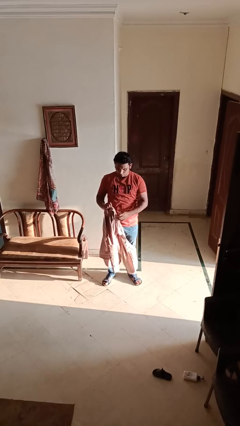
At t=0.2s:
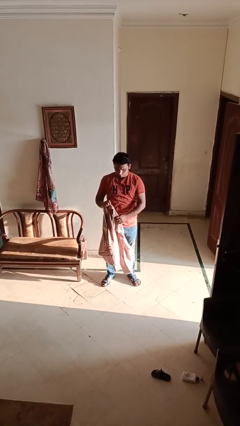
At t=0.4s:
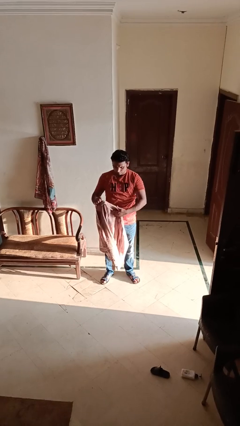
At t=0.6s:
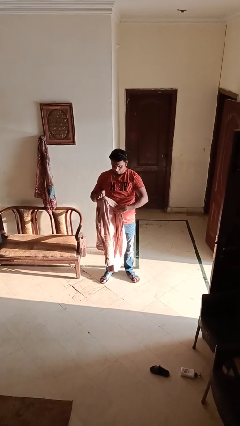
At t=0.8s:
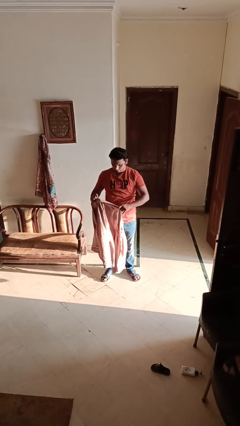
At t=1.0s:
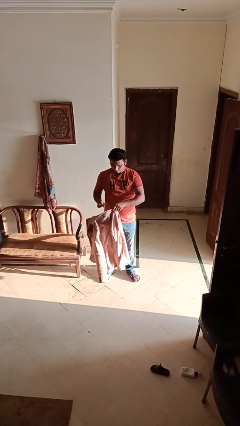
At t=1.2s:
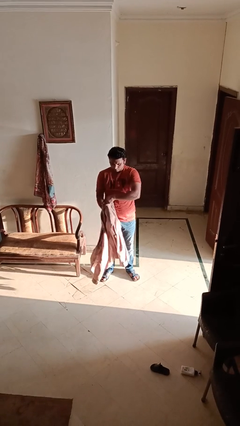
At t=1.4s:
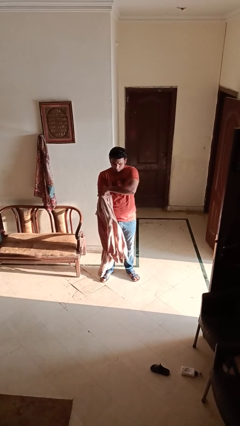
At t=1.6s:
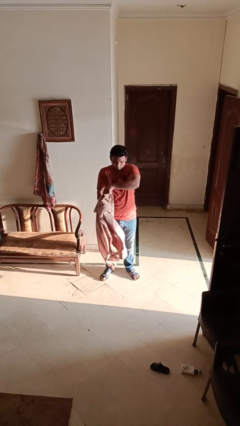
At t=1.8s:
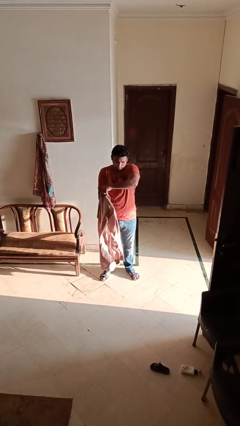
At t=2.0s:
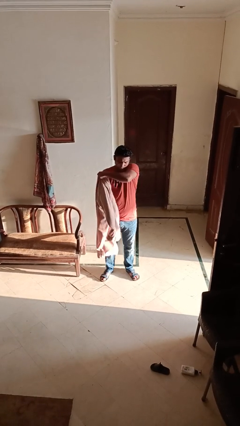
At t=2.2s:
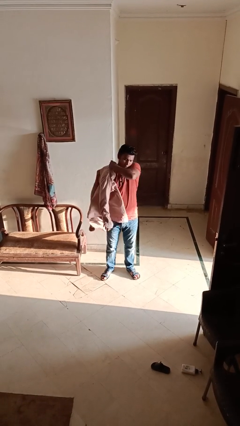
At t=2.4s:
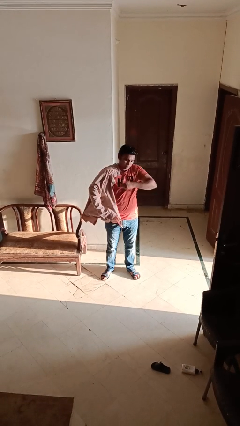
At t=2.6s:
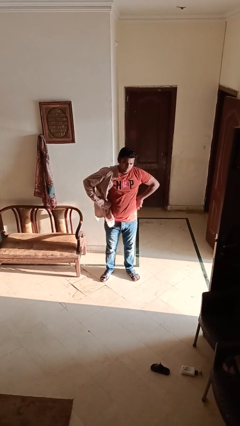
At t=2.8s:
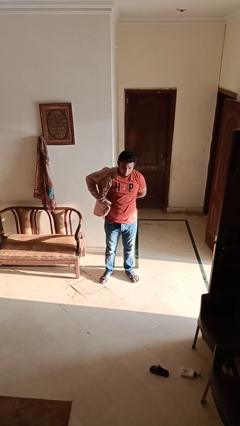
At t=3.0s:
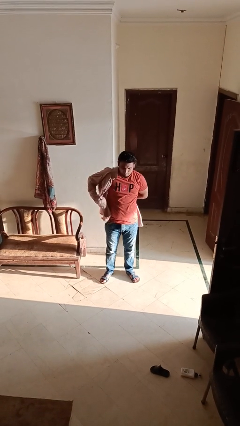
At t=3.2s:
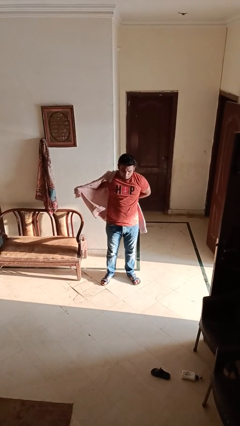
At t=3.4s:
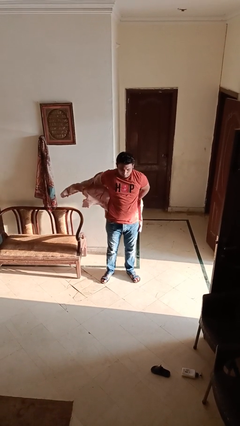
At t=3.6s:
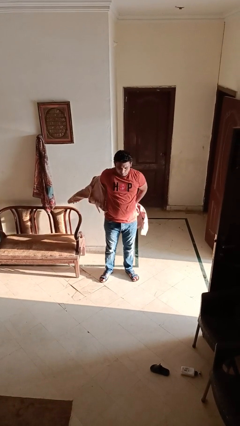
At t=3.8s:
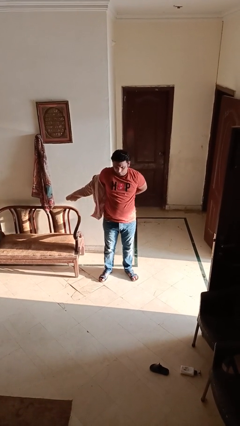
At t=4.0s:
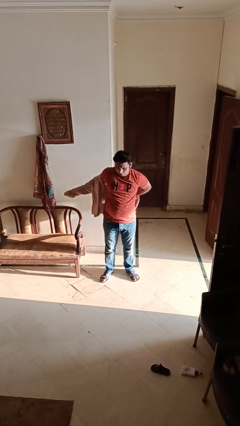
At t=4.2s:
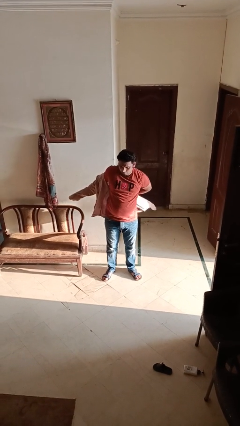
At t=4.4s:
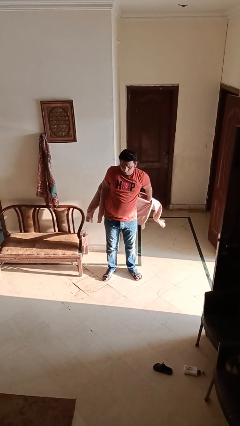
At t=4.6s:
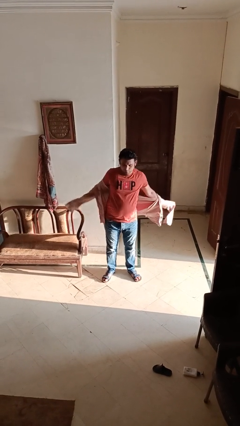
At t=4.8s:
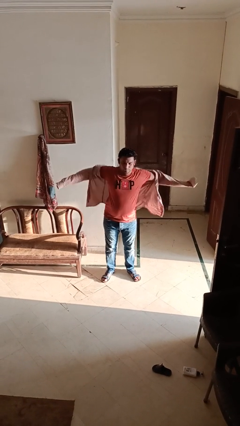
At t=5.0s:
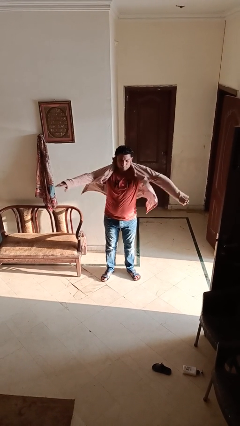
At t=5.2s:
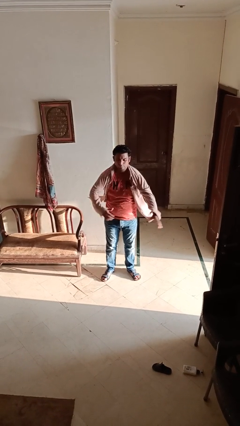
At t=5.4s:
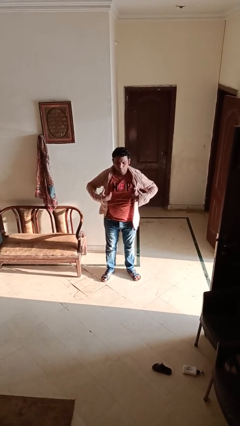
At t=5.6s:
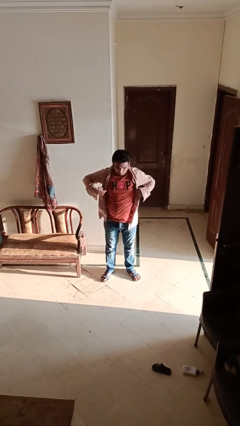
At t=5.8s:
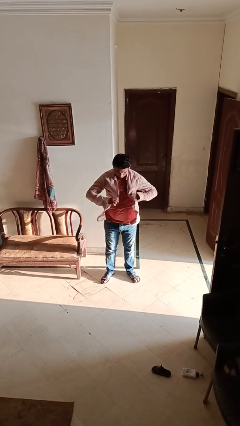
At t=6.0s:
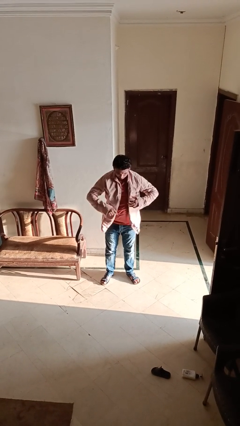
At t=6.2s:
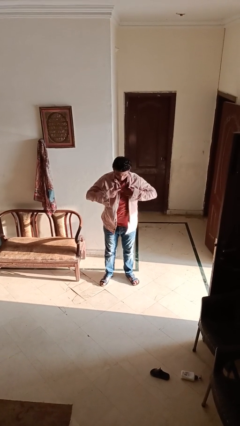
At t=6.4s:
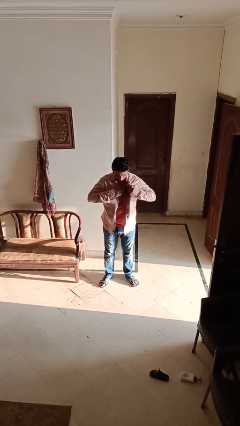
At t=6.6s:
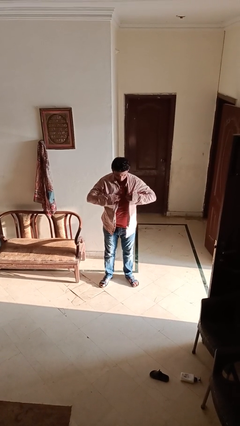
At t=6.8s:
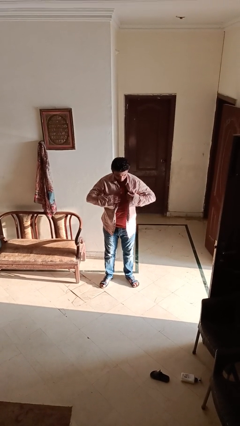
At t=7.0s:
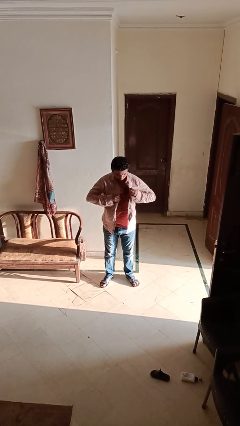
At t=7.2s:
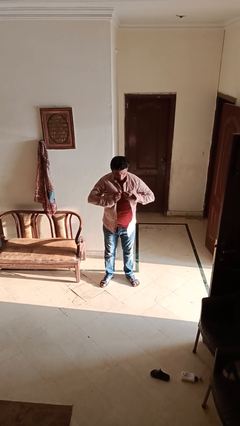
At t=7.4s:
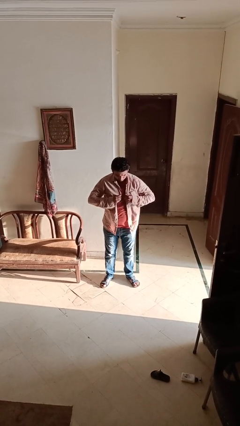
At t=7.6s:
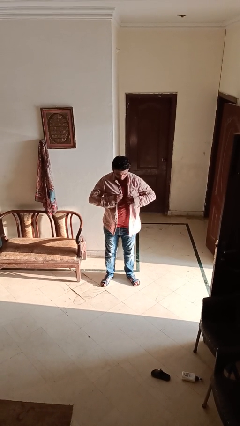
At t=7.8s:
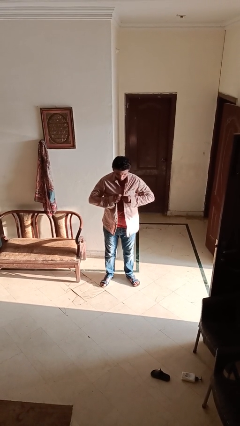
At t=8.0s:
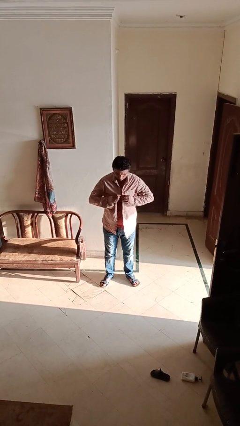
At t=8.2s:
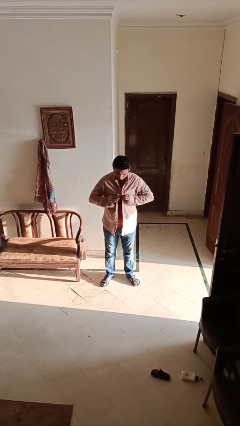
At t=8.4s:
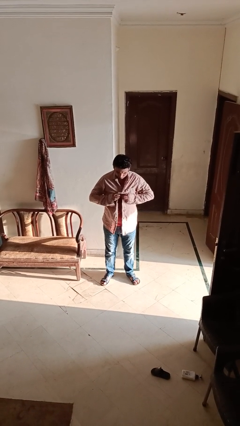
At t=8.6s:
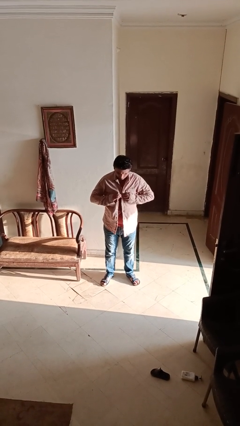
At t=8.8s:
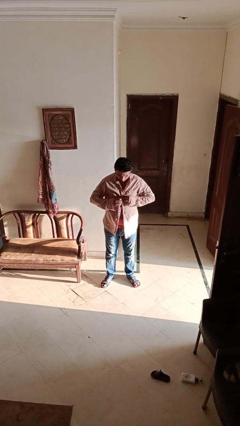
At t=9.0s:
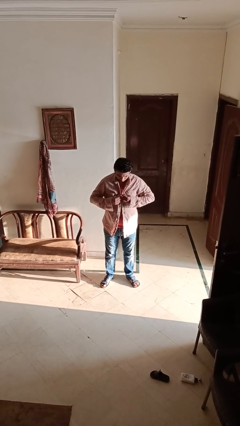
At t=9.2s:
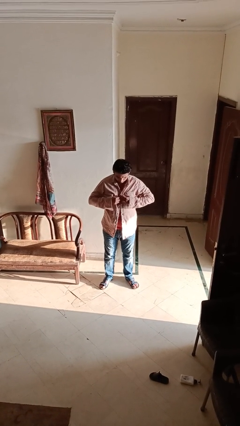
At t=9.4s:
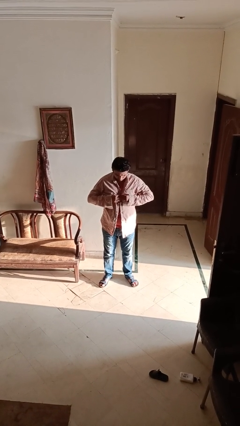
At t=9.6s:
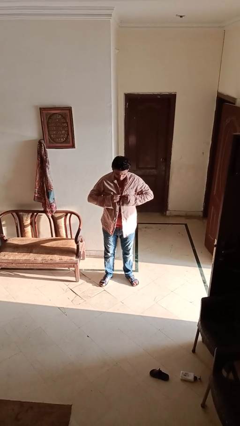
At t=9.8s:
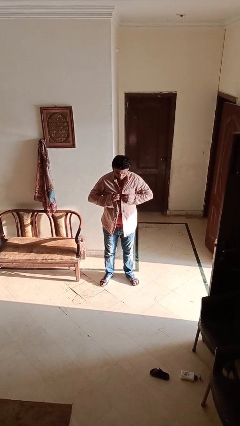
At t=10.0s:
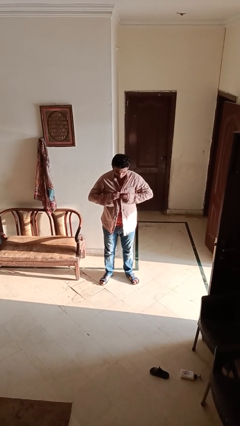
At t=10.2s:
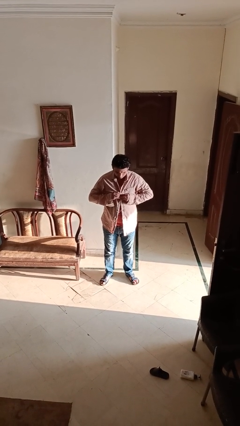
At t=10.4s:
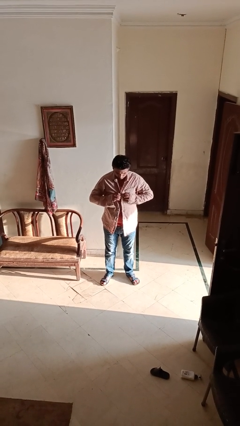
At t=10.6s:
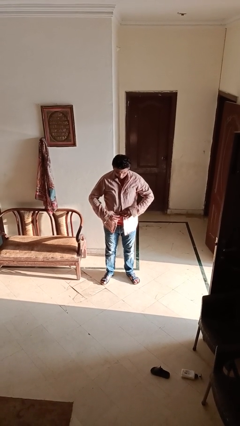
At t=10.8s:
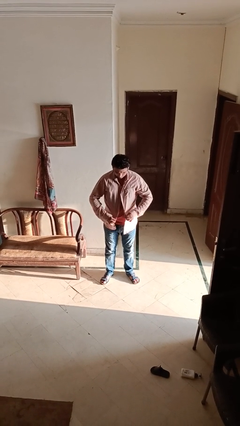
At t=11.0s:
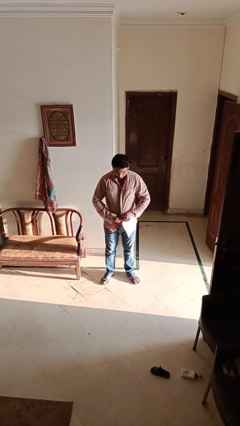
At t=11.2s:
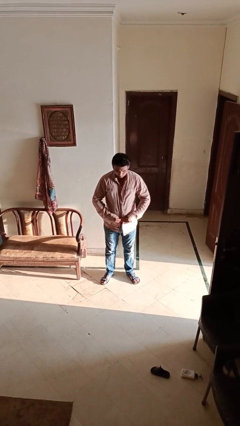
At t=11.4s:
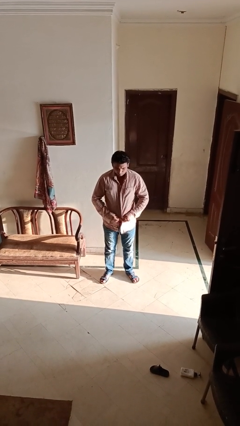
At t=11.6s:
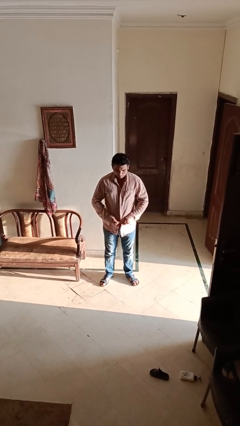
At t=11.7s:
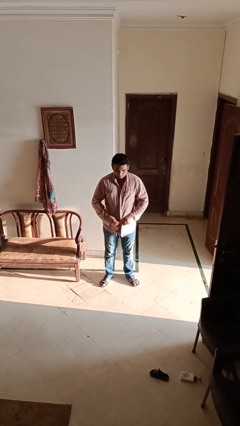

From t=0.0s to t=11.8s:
person puts on shirt

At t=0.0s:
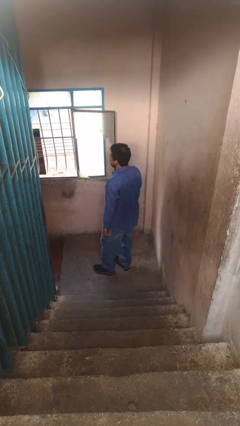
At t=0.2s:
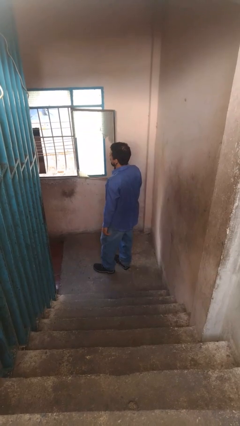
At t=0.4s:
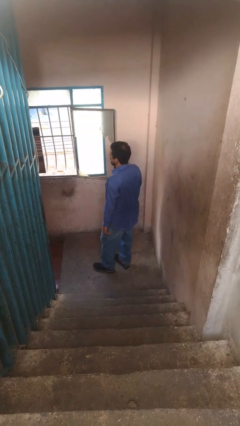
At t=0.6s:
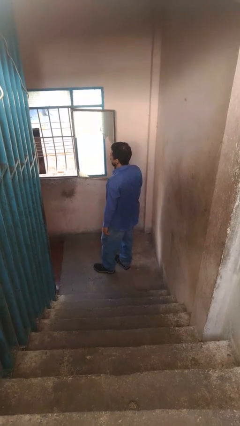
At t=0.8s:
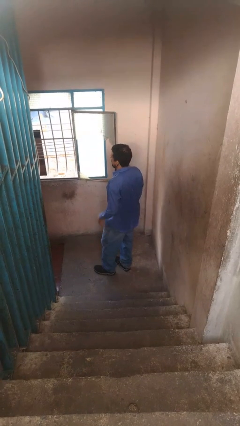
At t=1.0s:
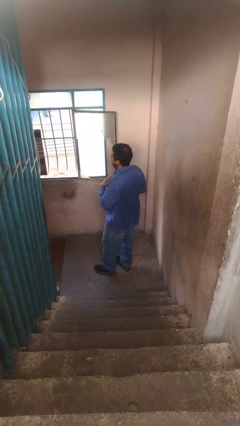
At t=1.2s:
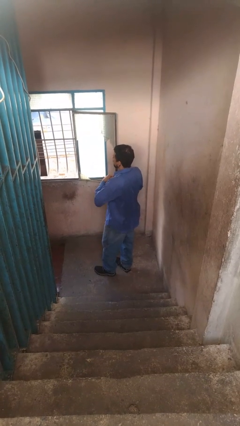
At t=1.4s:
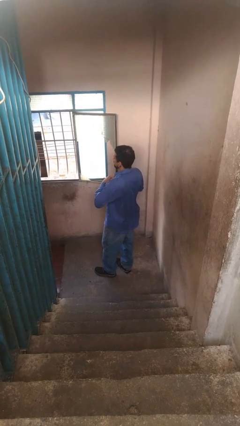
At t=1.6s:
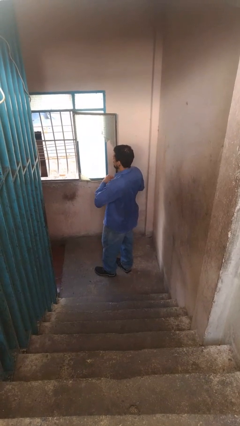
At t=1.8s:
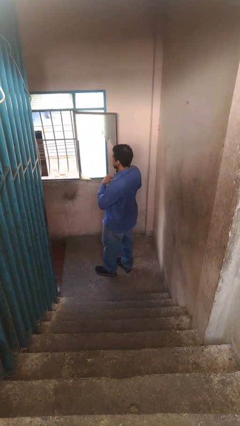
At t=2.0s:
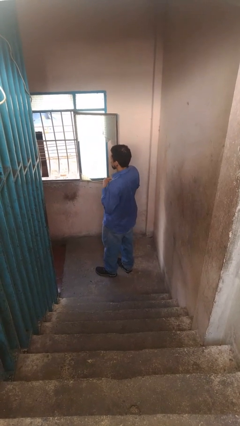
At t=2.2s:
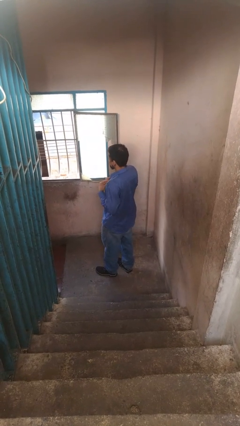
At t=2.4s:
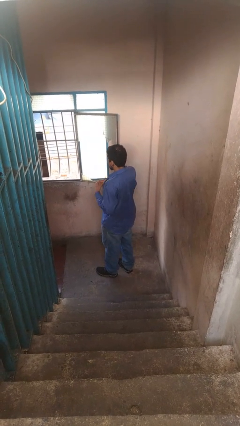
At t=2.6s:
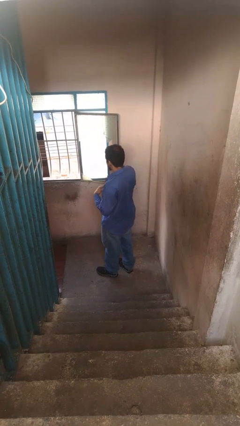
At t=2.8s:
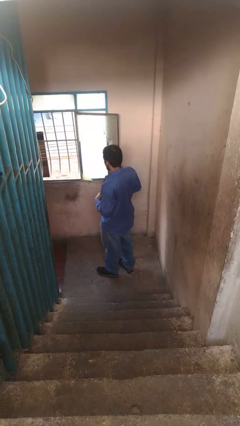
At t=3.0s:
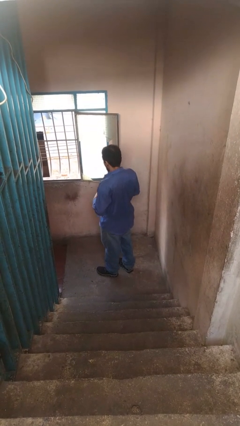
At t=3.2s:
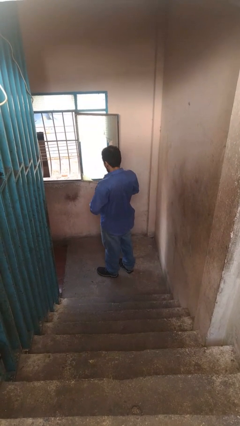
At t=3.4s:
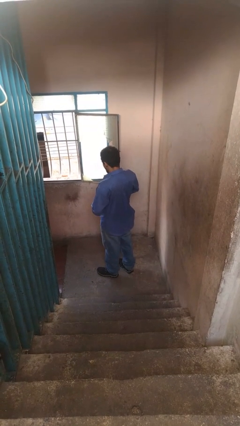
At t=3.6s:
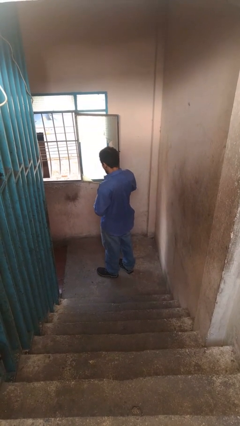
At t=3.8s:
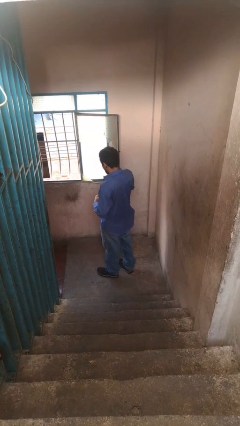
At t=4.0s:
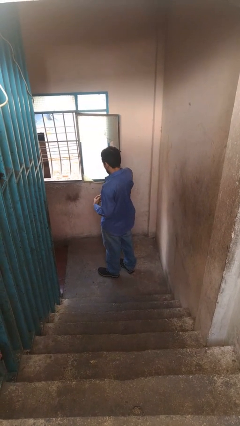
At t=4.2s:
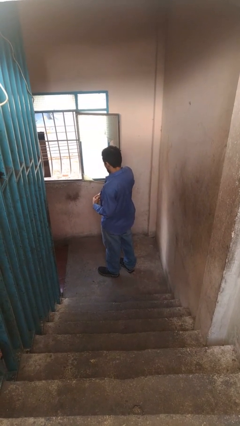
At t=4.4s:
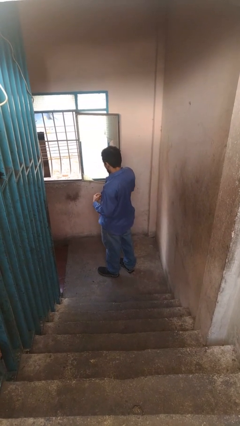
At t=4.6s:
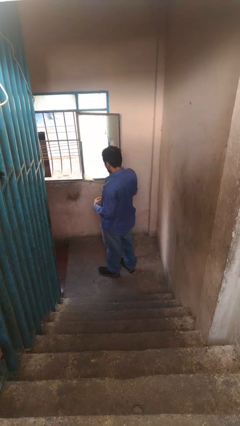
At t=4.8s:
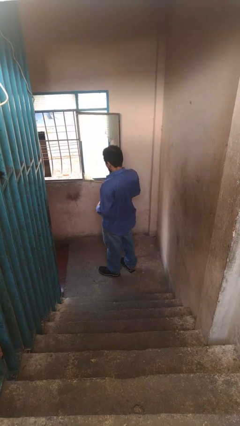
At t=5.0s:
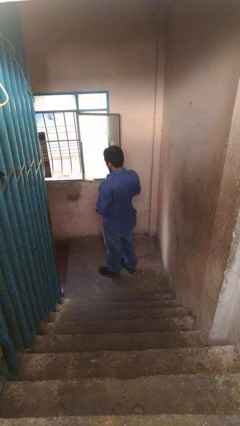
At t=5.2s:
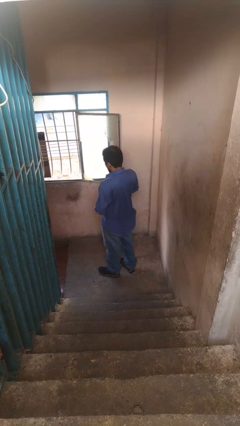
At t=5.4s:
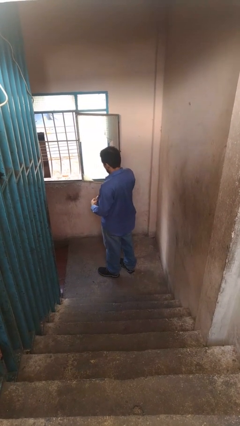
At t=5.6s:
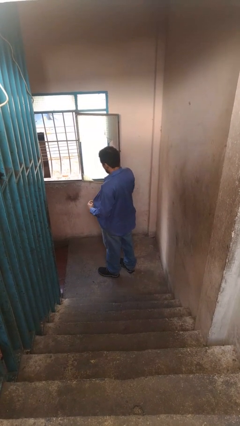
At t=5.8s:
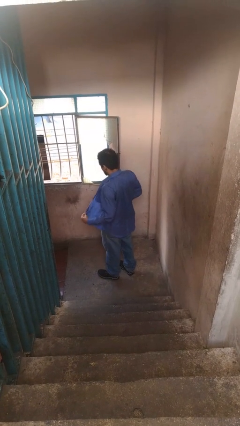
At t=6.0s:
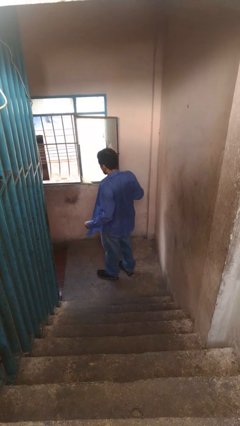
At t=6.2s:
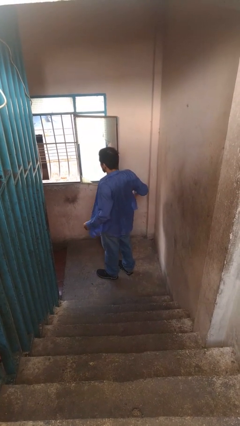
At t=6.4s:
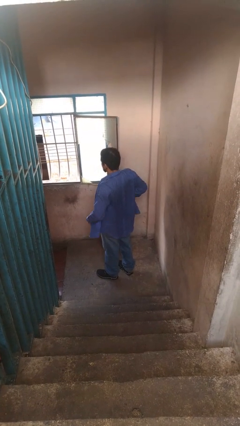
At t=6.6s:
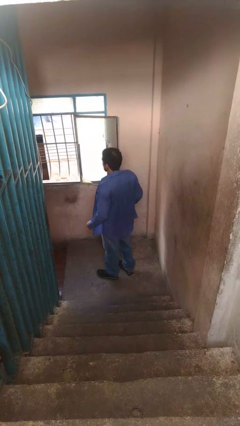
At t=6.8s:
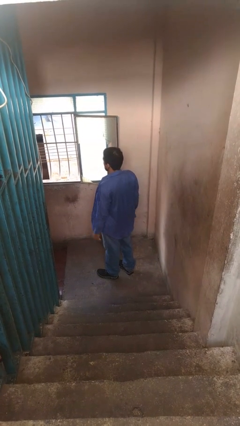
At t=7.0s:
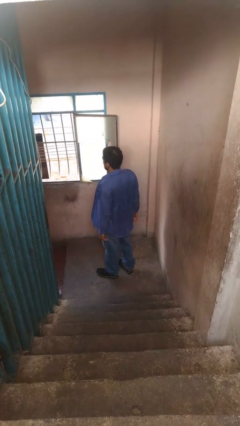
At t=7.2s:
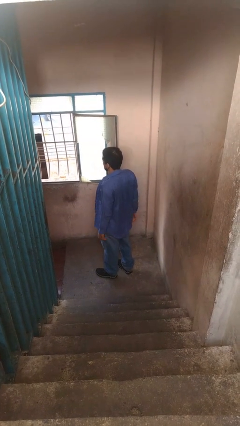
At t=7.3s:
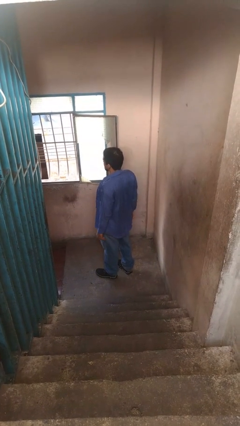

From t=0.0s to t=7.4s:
person unbuttons shirt
